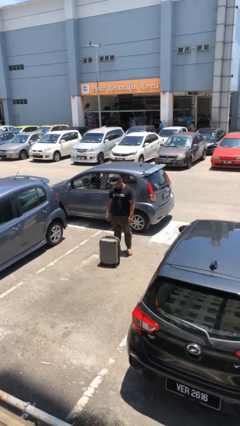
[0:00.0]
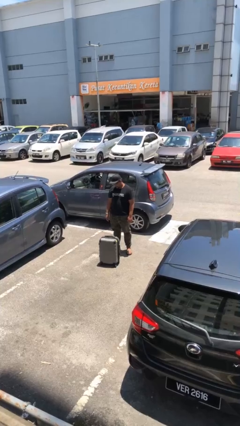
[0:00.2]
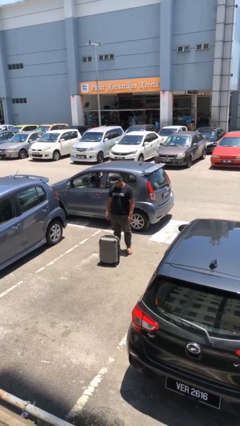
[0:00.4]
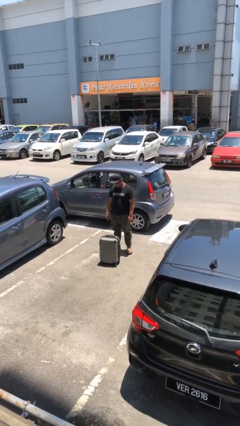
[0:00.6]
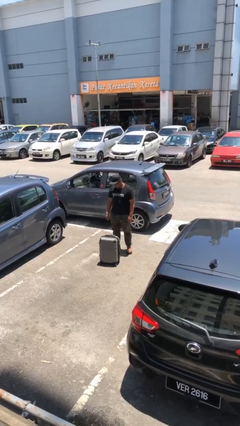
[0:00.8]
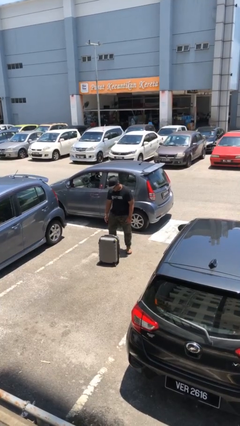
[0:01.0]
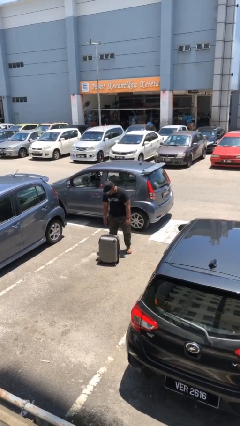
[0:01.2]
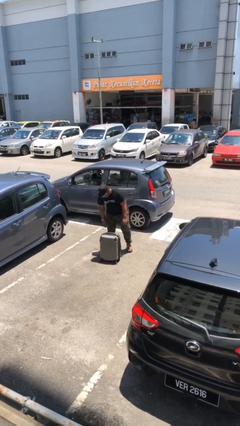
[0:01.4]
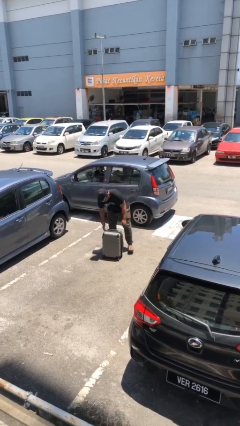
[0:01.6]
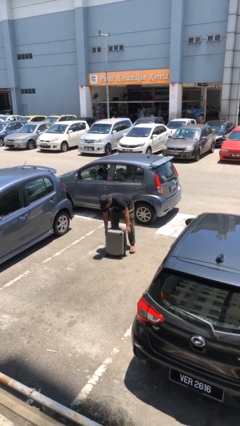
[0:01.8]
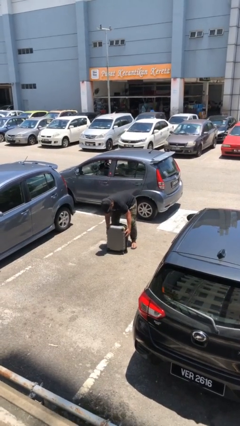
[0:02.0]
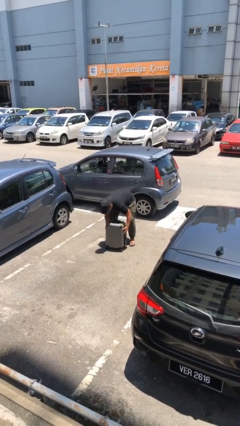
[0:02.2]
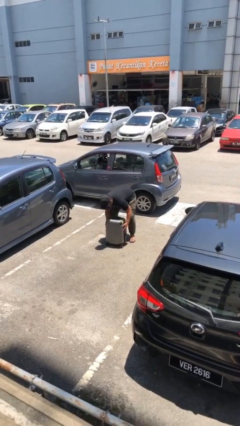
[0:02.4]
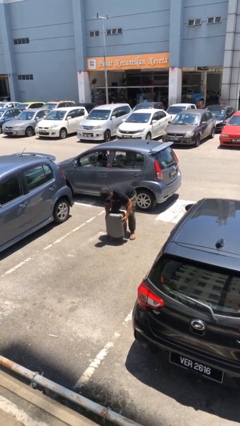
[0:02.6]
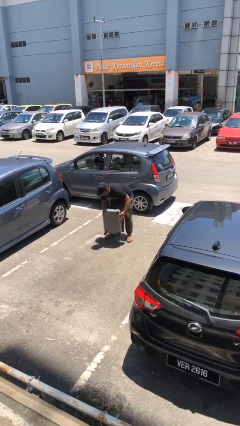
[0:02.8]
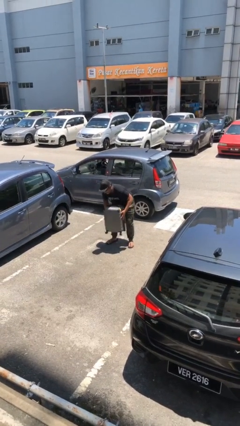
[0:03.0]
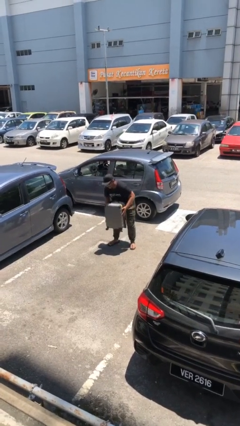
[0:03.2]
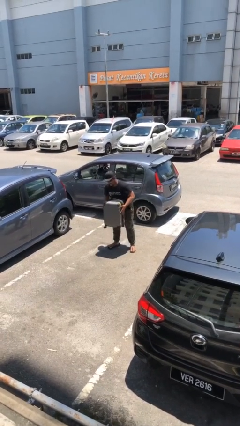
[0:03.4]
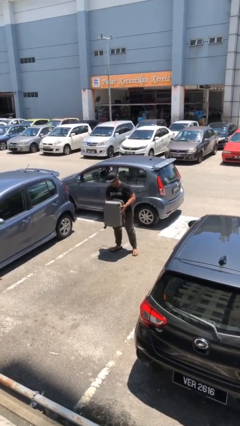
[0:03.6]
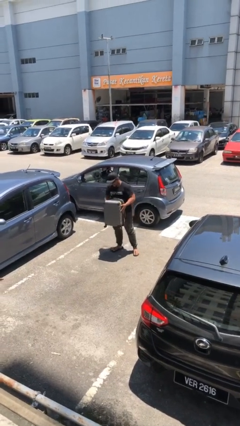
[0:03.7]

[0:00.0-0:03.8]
person picks up object from floor

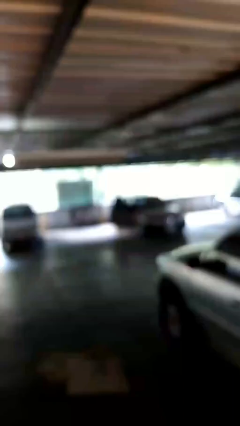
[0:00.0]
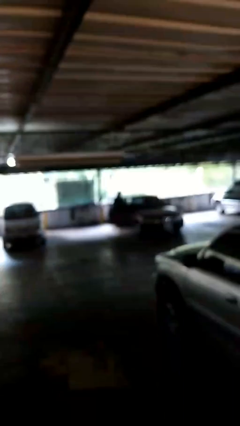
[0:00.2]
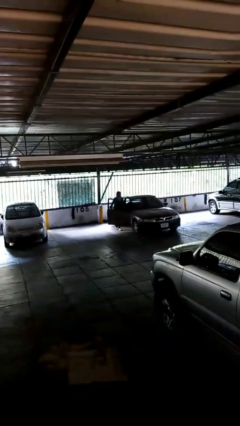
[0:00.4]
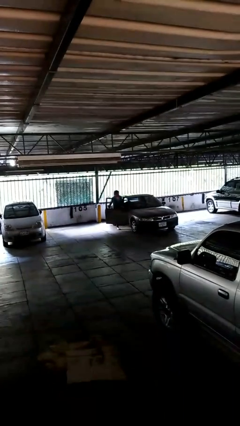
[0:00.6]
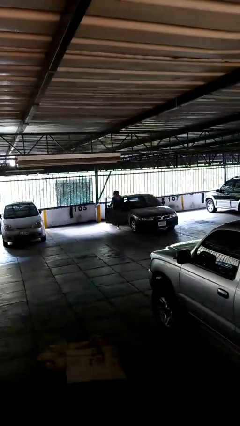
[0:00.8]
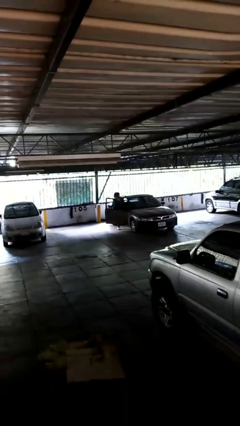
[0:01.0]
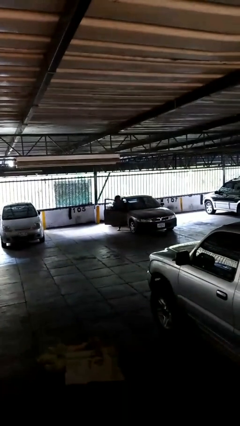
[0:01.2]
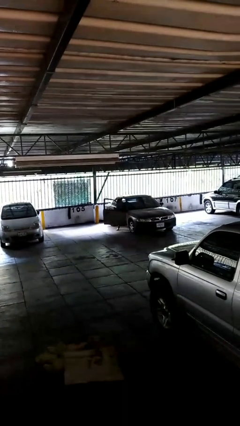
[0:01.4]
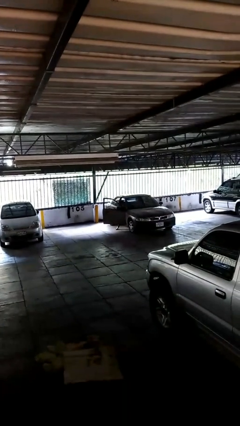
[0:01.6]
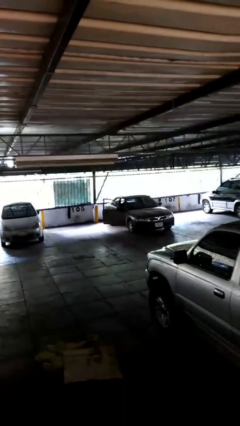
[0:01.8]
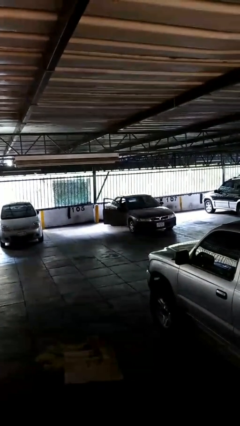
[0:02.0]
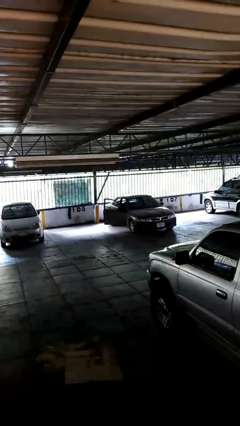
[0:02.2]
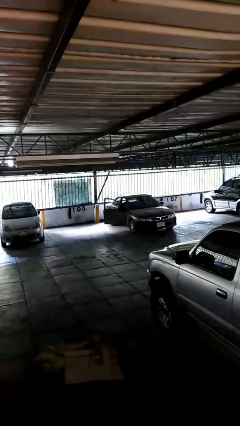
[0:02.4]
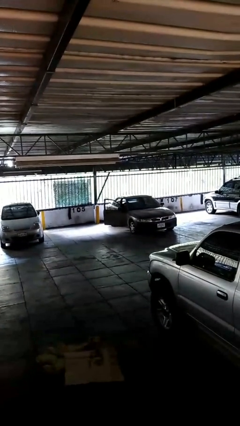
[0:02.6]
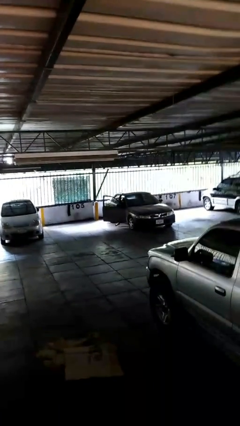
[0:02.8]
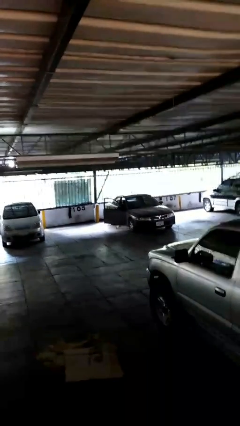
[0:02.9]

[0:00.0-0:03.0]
person enters car

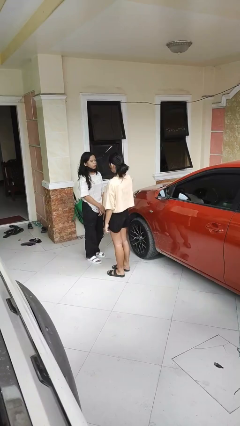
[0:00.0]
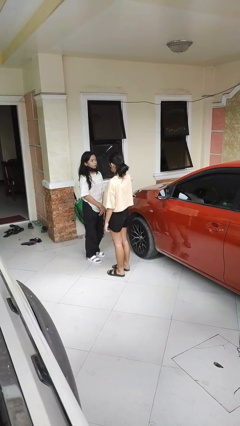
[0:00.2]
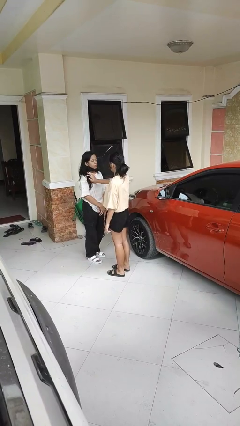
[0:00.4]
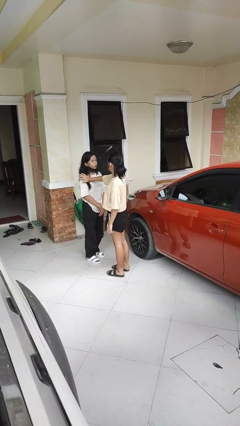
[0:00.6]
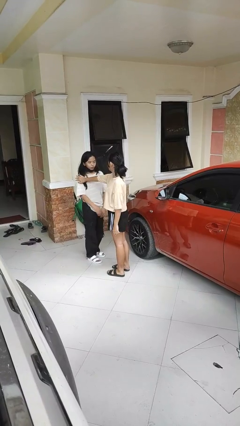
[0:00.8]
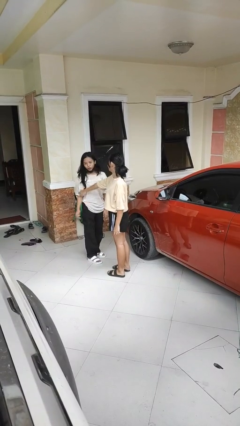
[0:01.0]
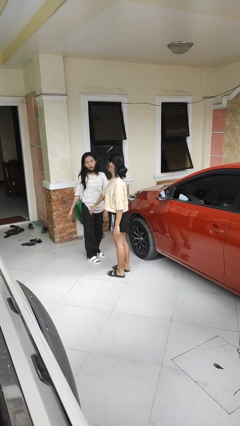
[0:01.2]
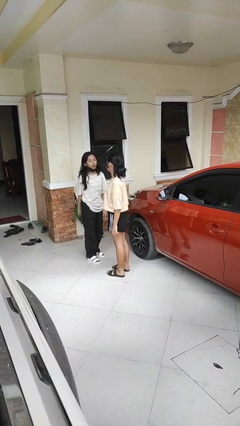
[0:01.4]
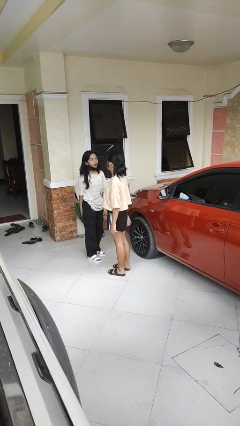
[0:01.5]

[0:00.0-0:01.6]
person shoves person

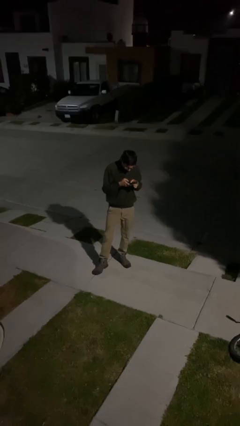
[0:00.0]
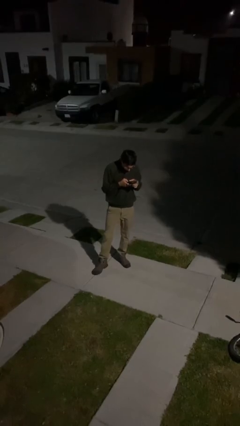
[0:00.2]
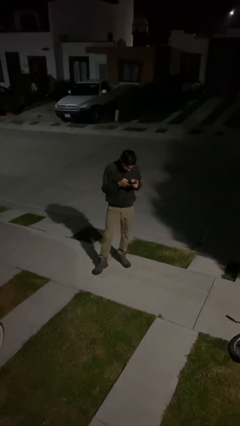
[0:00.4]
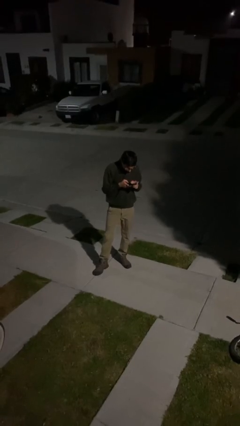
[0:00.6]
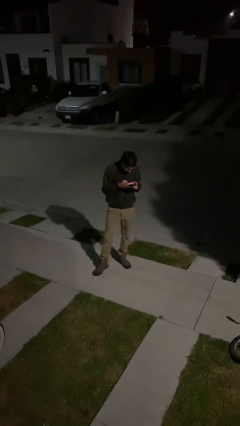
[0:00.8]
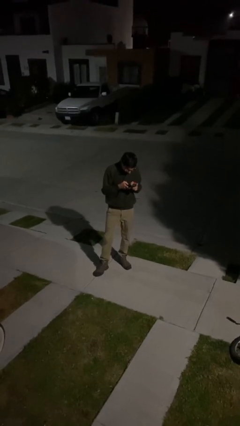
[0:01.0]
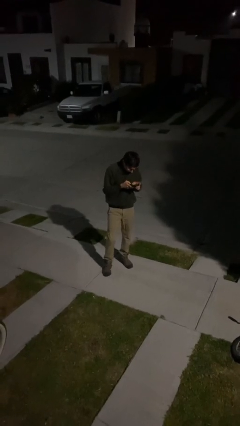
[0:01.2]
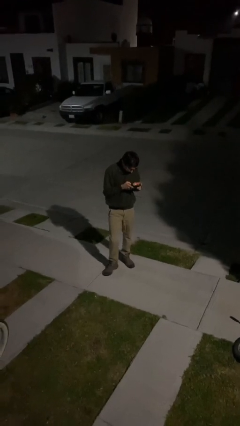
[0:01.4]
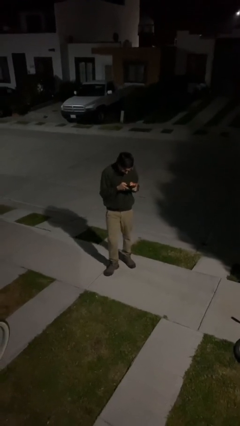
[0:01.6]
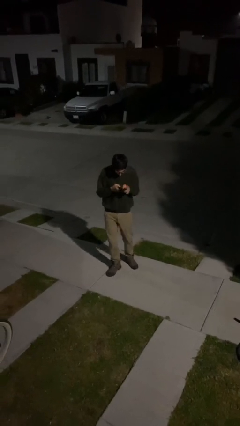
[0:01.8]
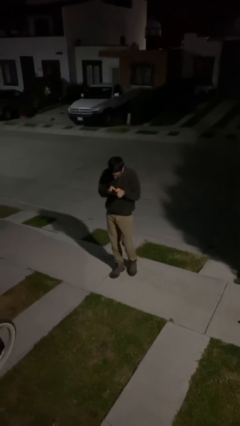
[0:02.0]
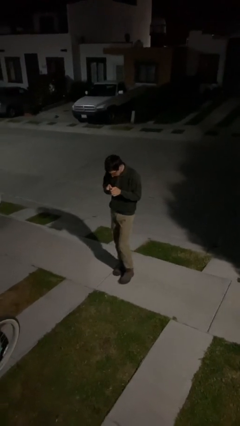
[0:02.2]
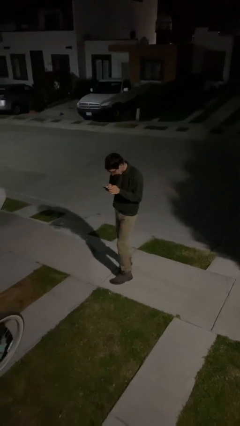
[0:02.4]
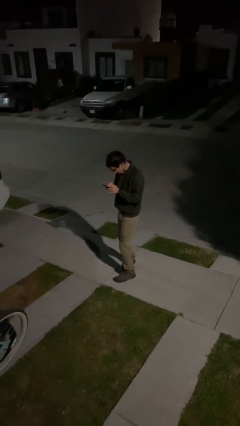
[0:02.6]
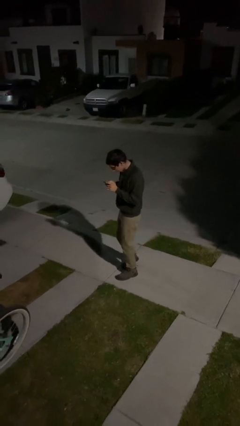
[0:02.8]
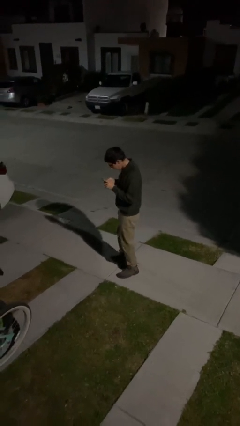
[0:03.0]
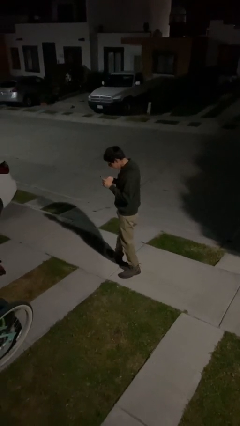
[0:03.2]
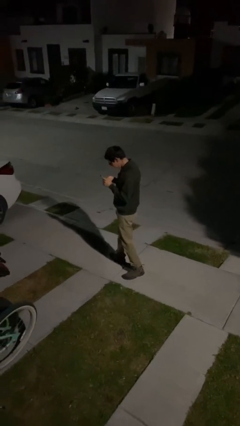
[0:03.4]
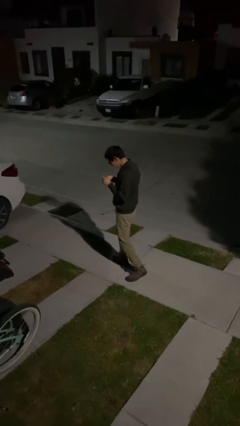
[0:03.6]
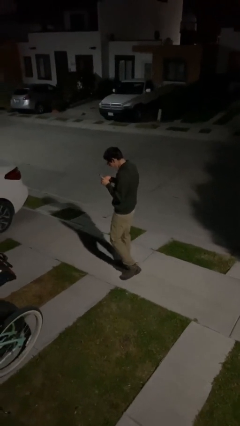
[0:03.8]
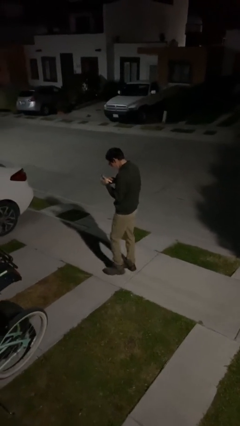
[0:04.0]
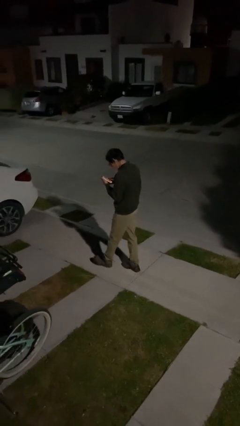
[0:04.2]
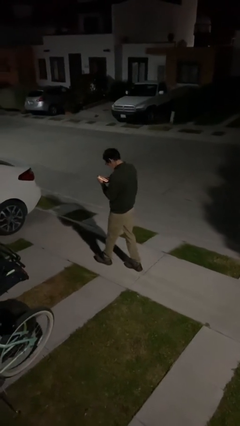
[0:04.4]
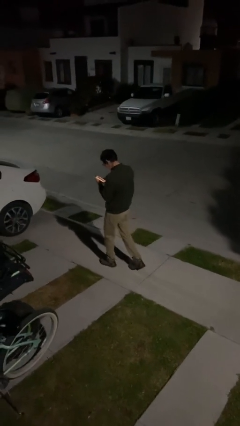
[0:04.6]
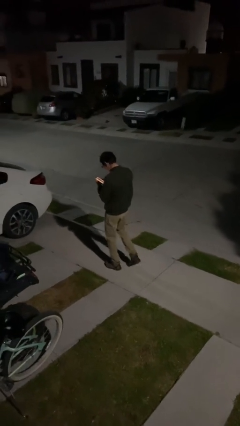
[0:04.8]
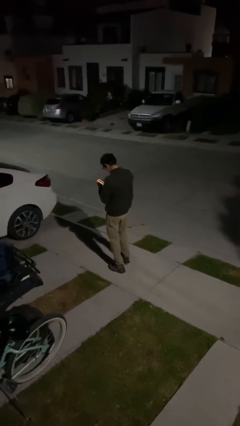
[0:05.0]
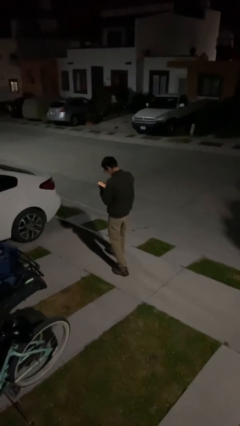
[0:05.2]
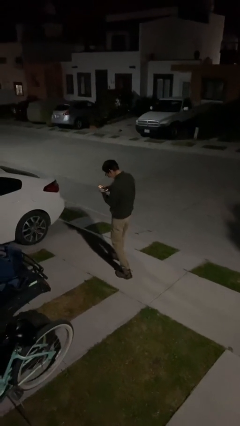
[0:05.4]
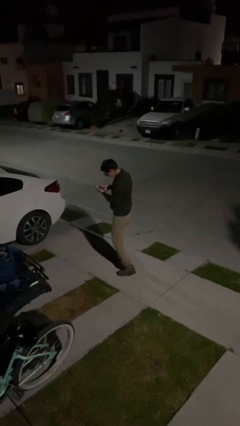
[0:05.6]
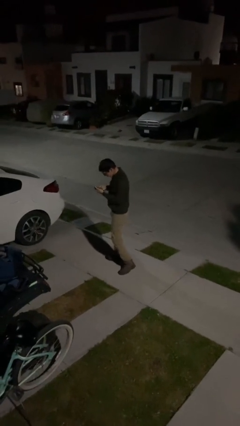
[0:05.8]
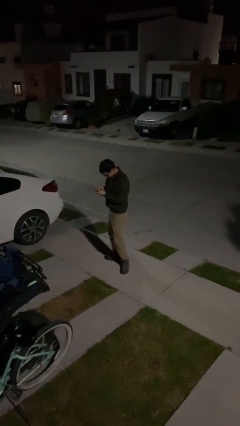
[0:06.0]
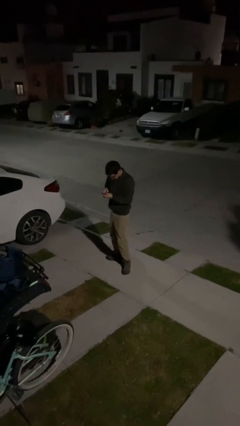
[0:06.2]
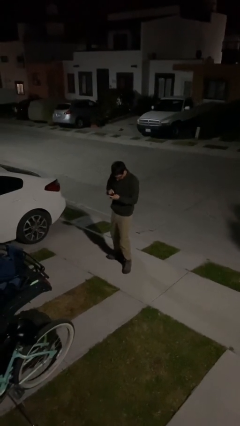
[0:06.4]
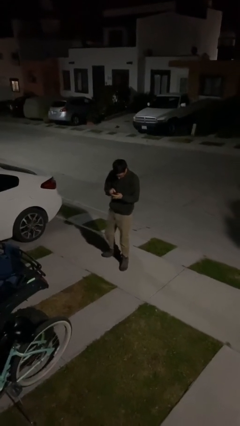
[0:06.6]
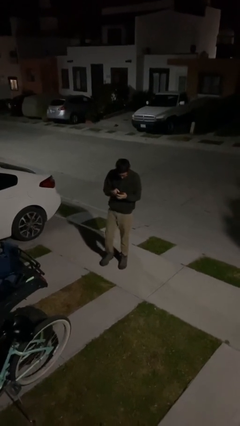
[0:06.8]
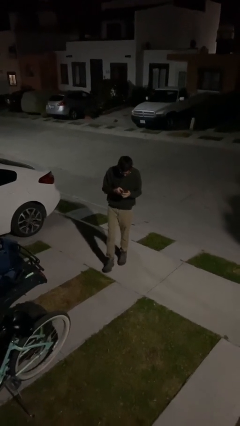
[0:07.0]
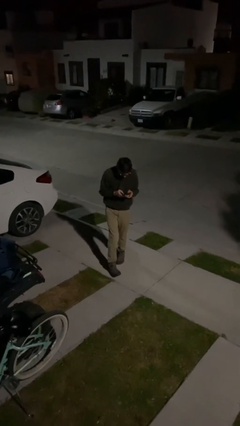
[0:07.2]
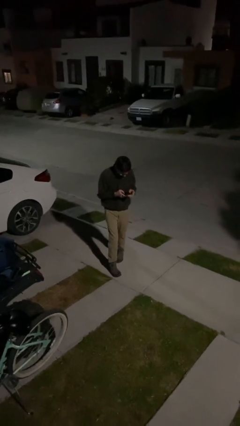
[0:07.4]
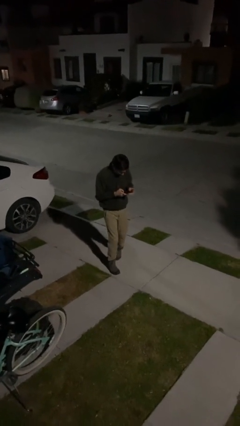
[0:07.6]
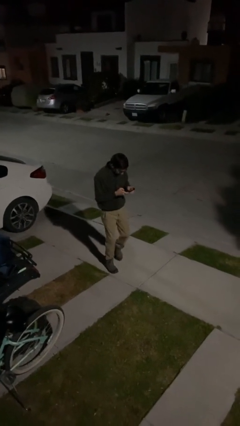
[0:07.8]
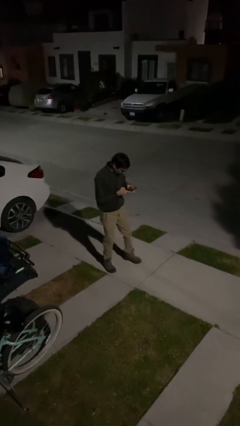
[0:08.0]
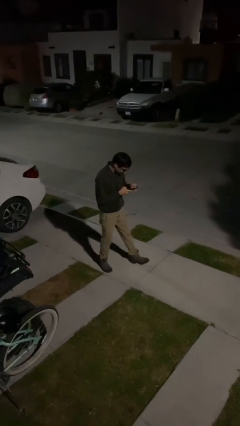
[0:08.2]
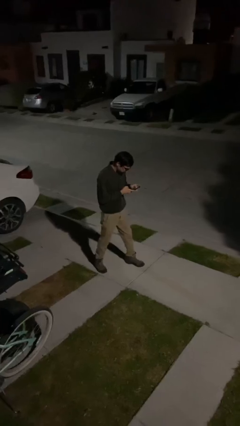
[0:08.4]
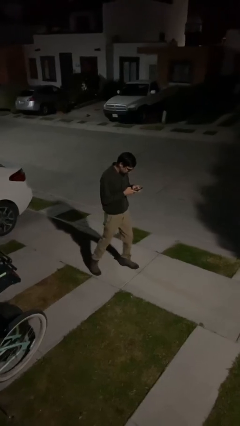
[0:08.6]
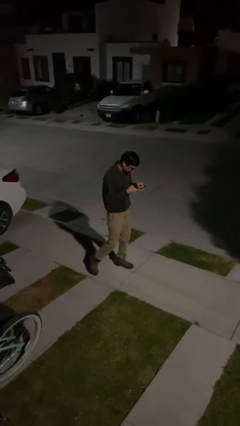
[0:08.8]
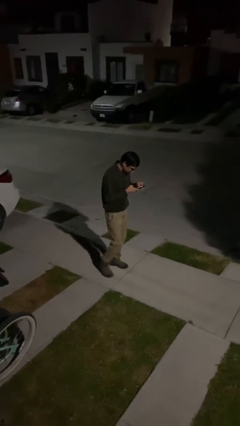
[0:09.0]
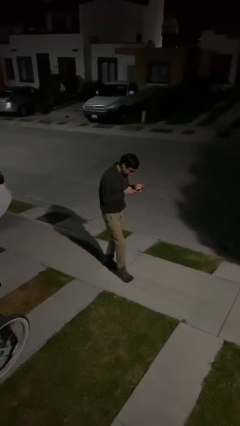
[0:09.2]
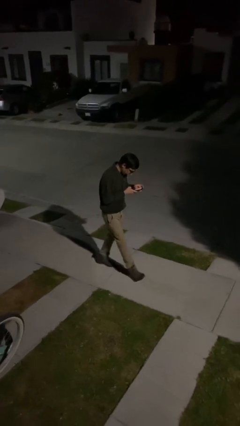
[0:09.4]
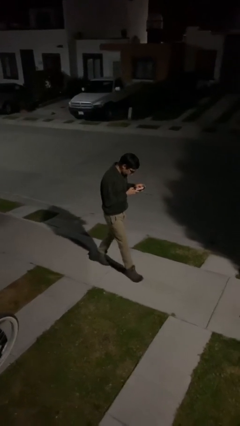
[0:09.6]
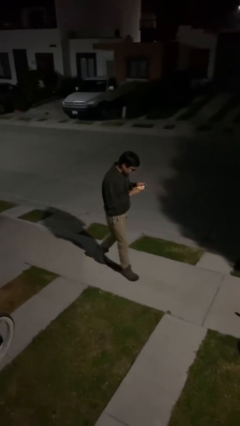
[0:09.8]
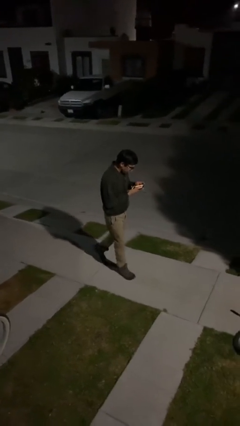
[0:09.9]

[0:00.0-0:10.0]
person texts on phone
